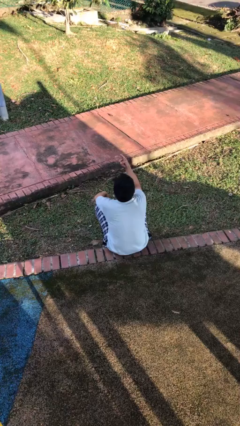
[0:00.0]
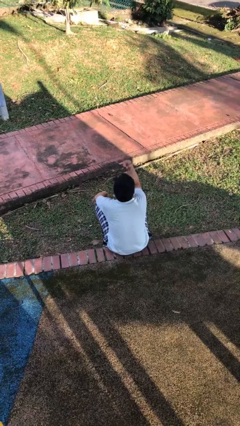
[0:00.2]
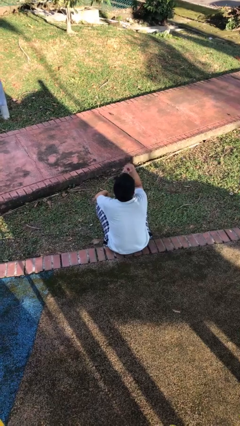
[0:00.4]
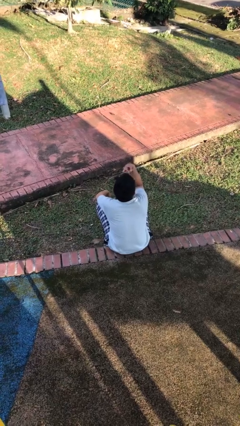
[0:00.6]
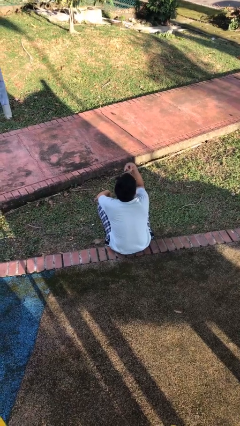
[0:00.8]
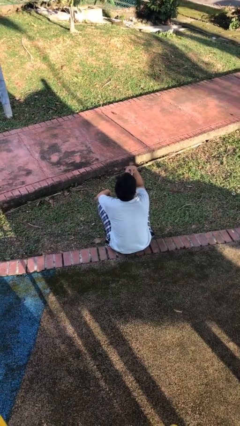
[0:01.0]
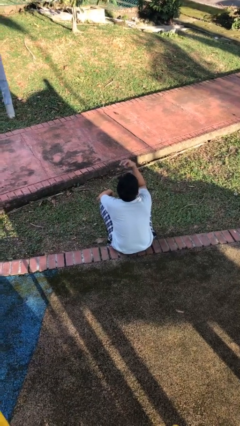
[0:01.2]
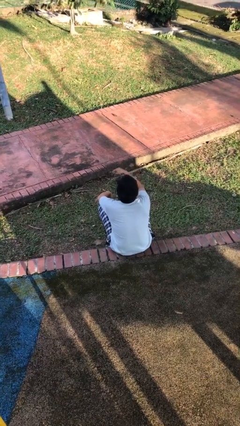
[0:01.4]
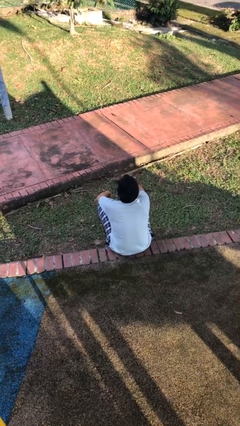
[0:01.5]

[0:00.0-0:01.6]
person gestures watch closely

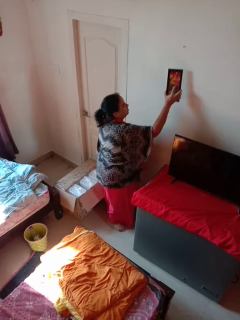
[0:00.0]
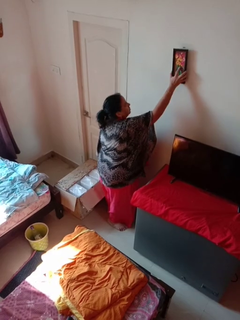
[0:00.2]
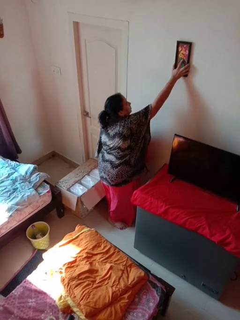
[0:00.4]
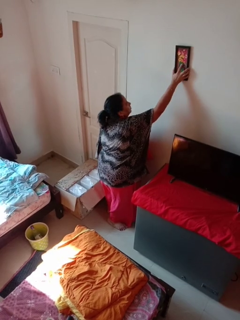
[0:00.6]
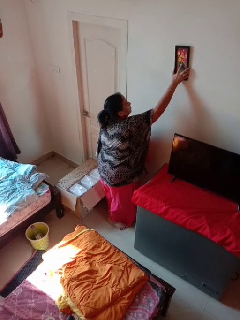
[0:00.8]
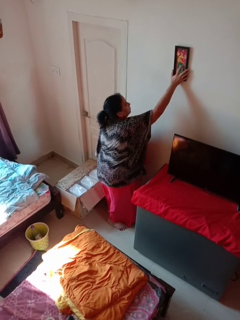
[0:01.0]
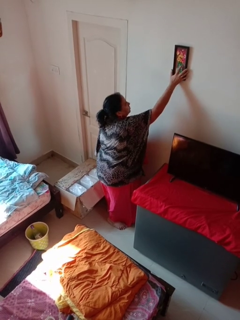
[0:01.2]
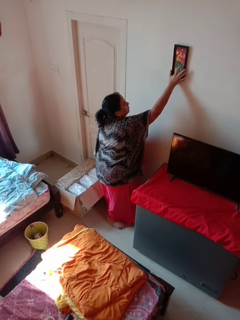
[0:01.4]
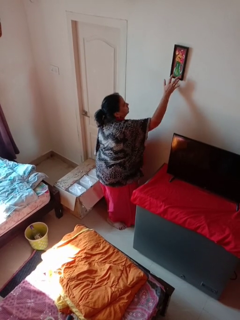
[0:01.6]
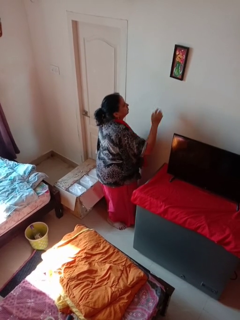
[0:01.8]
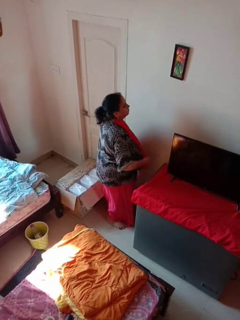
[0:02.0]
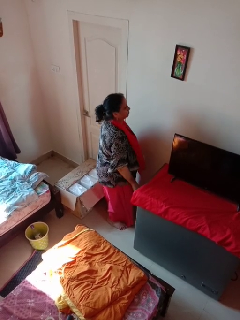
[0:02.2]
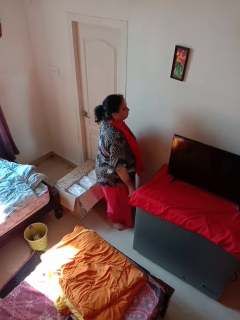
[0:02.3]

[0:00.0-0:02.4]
person puts up picture frame

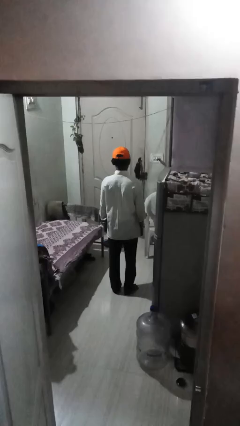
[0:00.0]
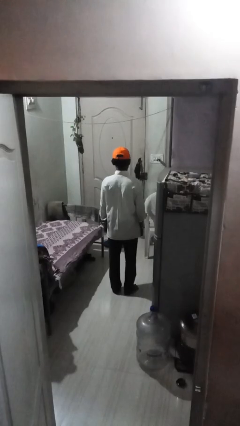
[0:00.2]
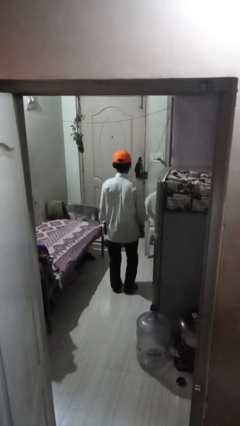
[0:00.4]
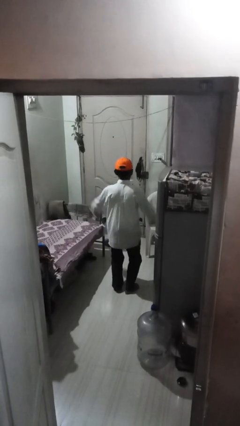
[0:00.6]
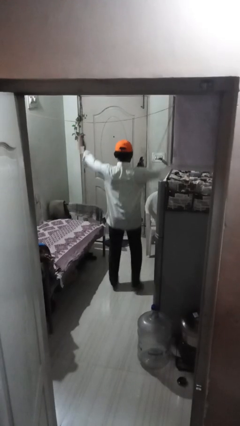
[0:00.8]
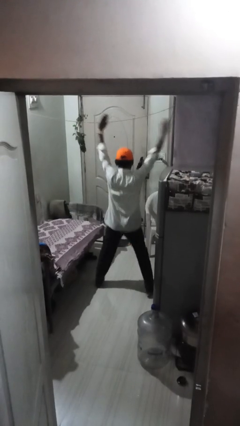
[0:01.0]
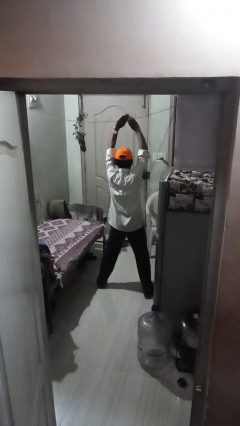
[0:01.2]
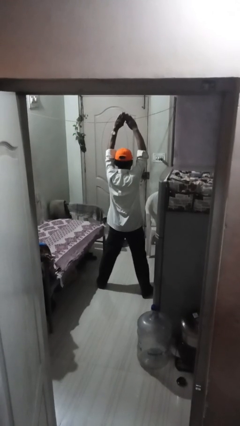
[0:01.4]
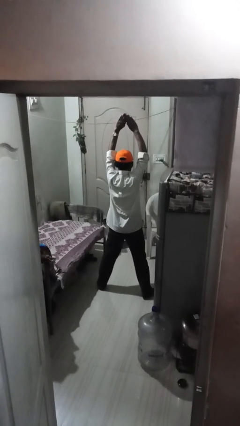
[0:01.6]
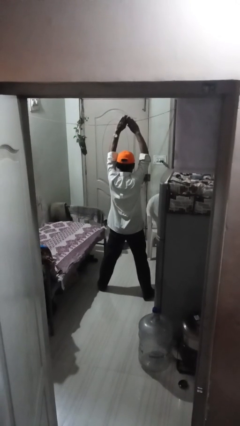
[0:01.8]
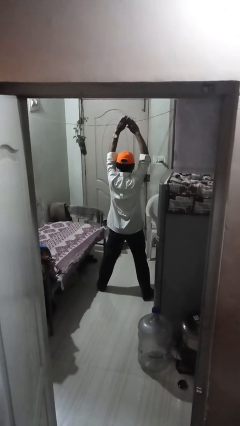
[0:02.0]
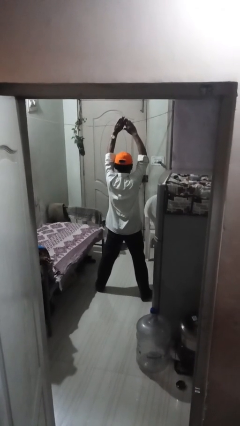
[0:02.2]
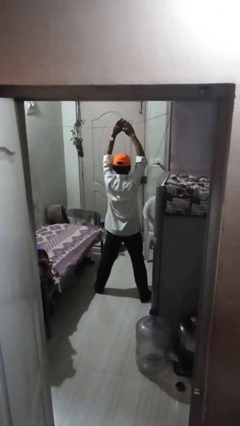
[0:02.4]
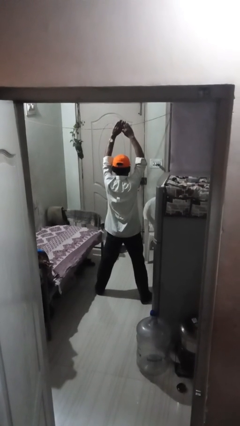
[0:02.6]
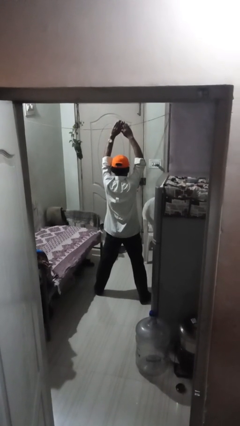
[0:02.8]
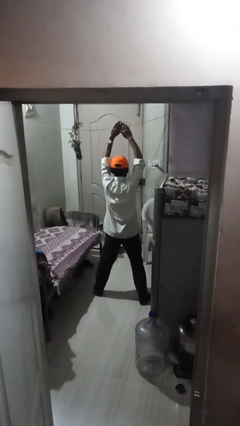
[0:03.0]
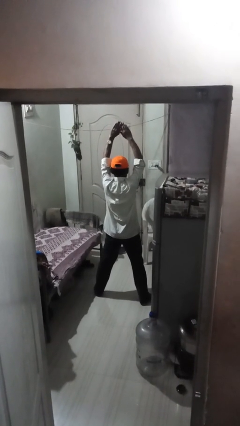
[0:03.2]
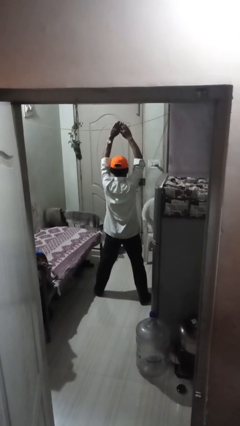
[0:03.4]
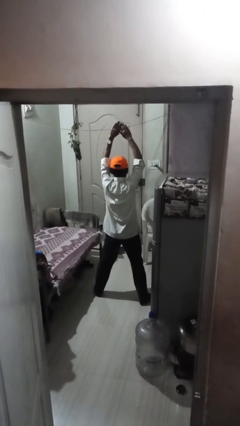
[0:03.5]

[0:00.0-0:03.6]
person exercises with jumping jacks

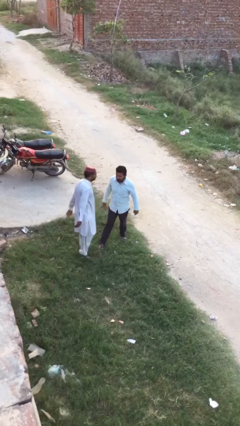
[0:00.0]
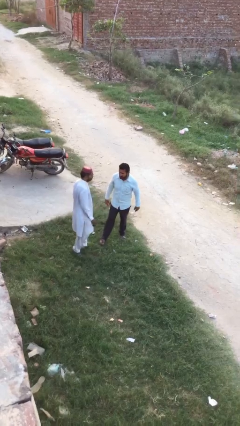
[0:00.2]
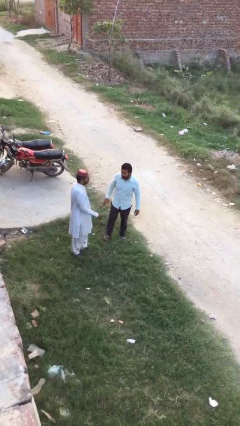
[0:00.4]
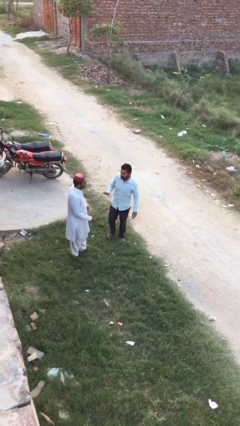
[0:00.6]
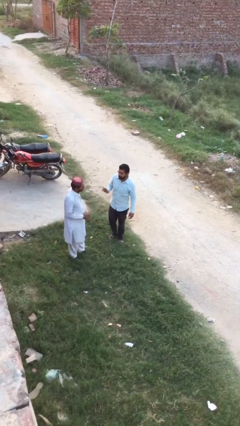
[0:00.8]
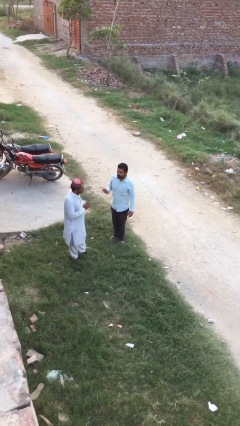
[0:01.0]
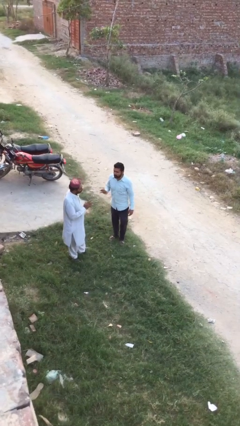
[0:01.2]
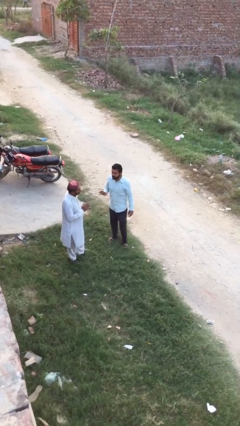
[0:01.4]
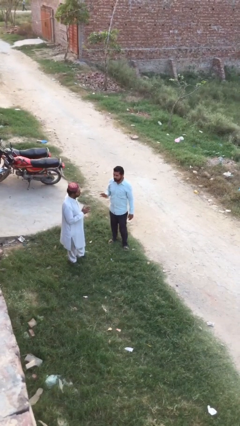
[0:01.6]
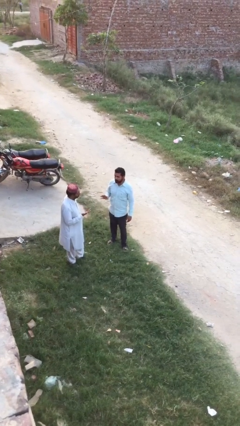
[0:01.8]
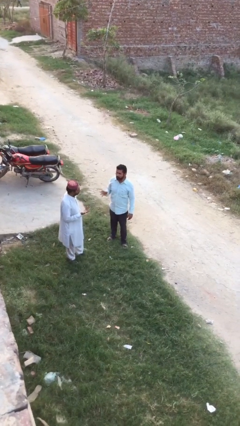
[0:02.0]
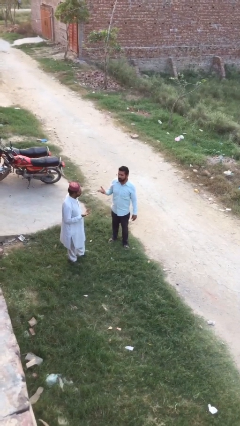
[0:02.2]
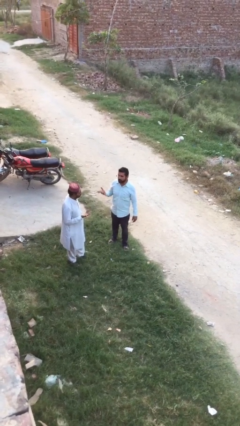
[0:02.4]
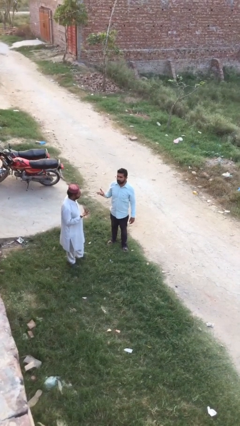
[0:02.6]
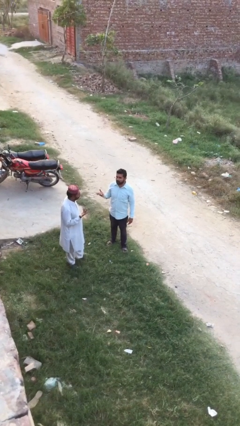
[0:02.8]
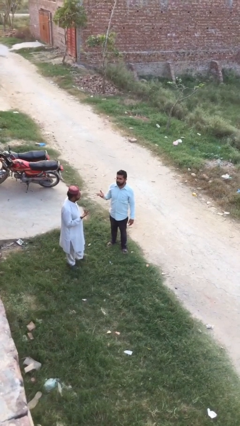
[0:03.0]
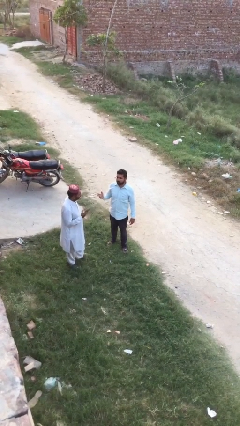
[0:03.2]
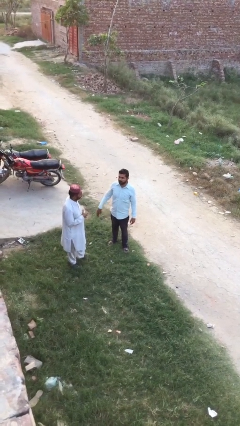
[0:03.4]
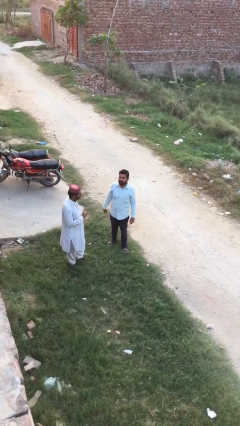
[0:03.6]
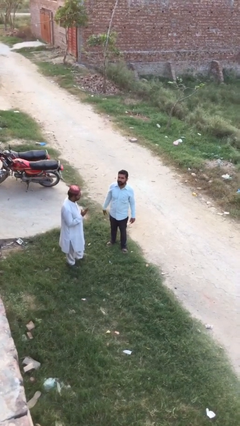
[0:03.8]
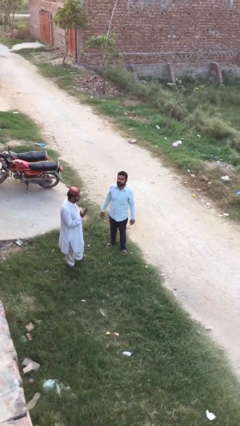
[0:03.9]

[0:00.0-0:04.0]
person talks to person

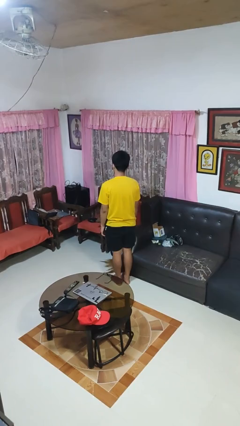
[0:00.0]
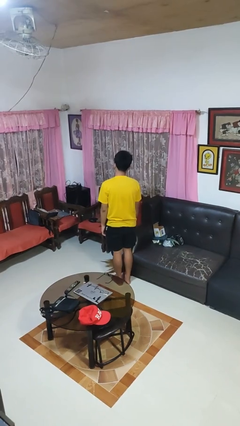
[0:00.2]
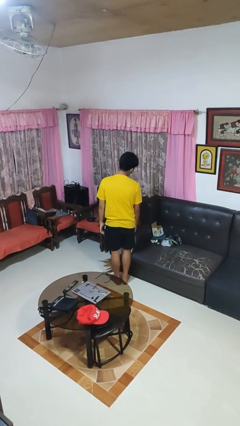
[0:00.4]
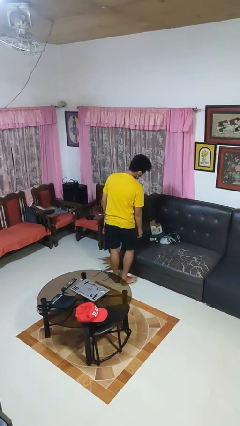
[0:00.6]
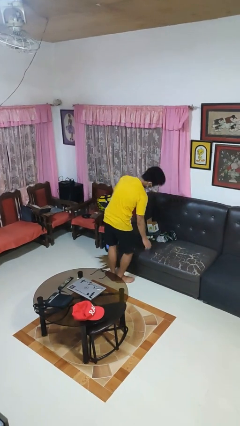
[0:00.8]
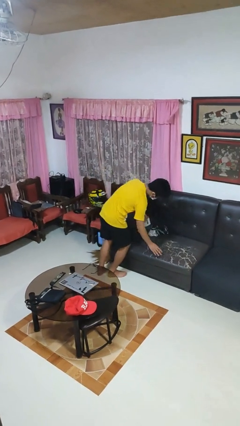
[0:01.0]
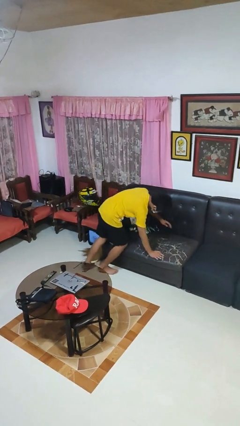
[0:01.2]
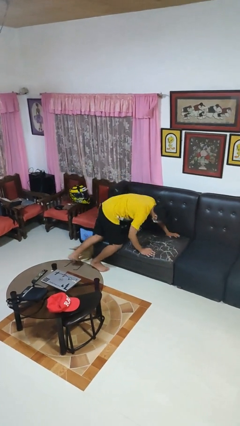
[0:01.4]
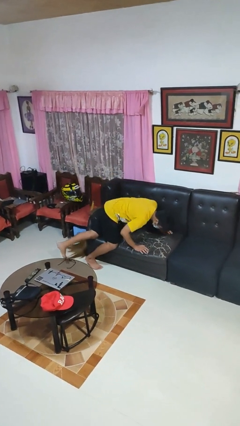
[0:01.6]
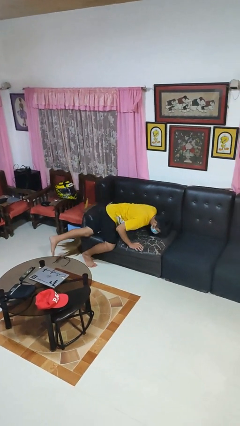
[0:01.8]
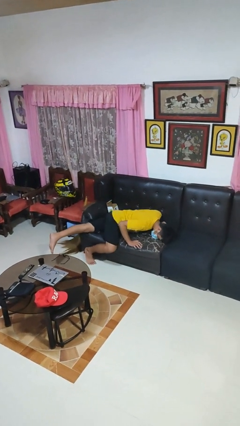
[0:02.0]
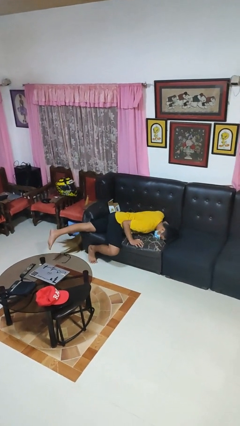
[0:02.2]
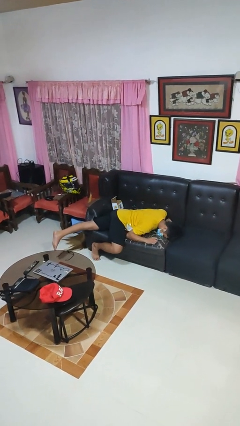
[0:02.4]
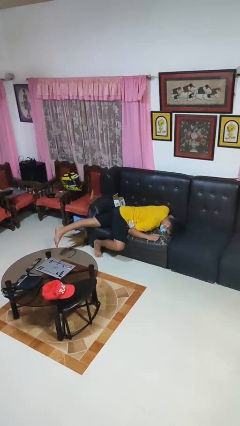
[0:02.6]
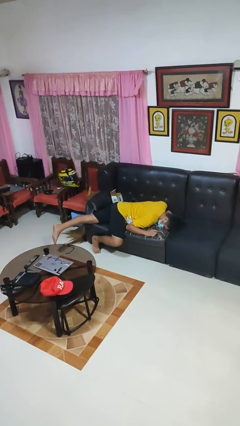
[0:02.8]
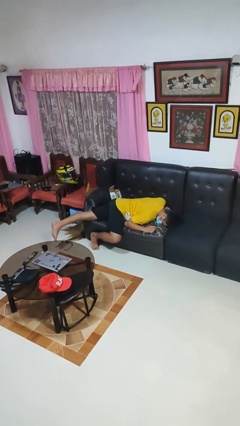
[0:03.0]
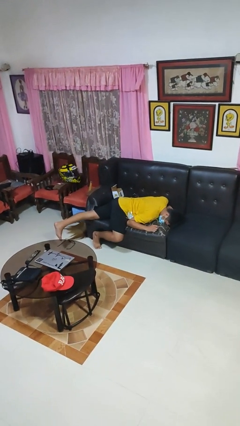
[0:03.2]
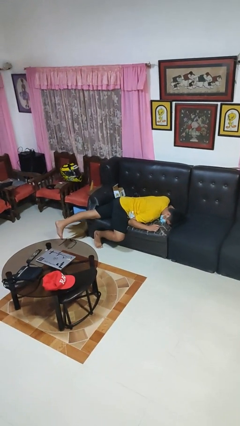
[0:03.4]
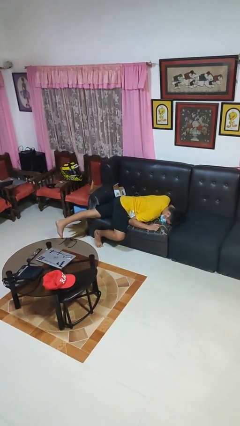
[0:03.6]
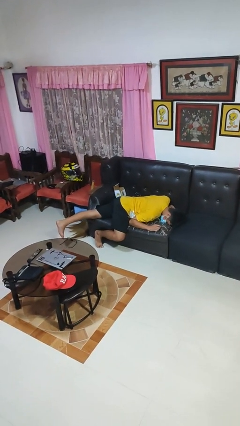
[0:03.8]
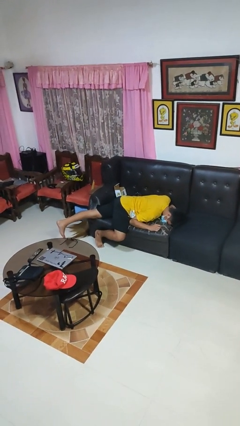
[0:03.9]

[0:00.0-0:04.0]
person lies down on couch

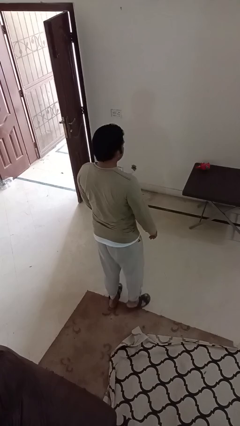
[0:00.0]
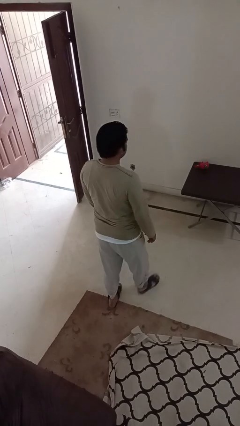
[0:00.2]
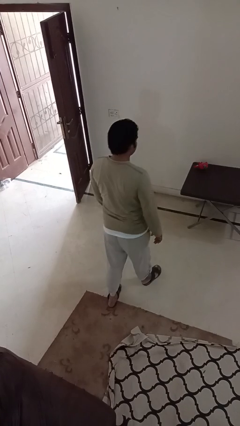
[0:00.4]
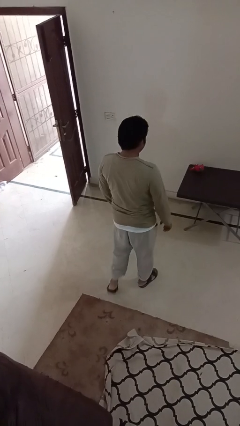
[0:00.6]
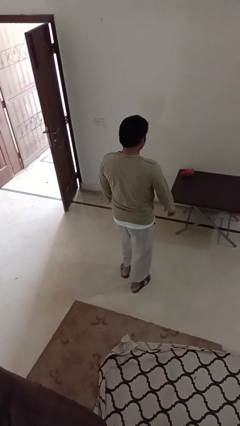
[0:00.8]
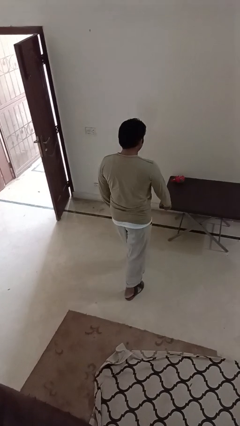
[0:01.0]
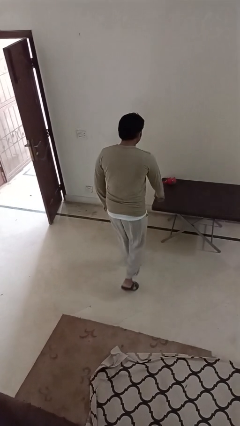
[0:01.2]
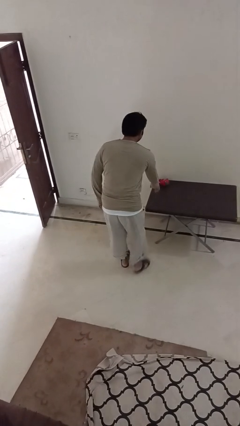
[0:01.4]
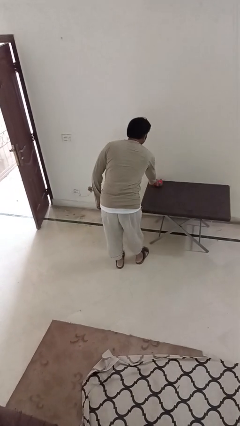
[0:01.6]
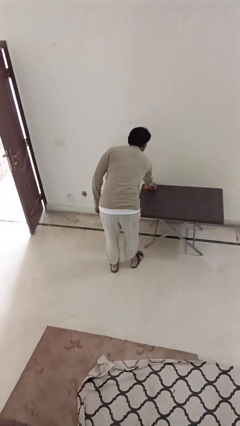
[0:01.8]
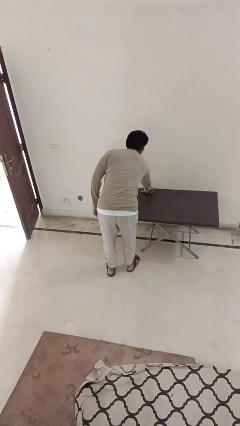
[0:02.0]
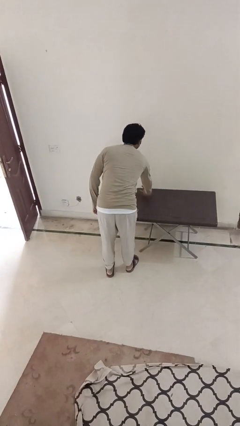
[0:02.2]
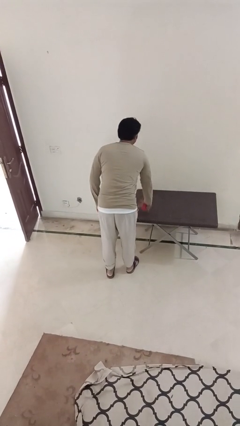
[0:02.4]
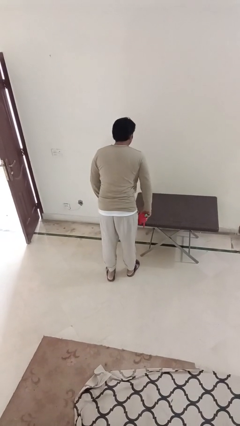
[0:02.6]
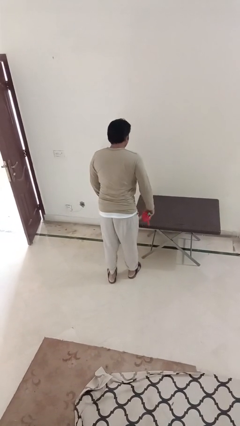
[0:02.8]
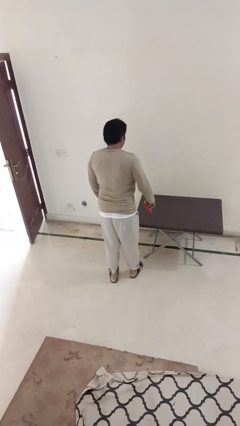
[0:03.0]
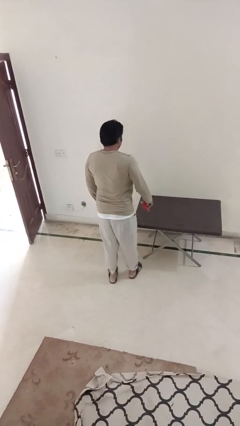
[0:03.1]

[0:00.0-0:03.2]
person picks up object from table
